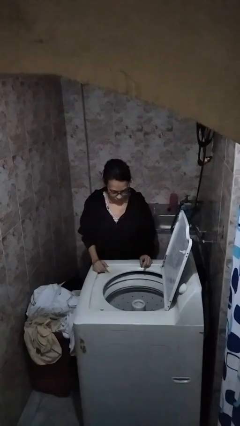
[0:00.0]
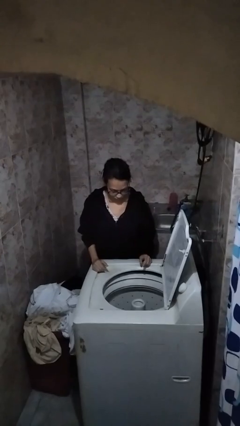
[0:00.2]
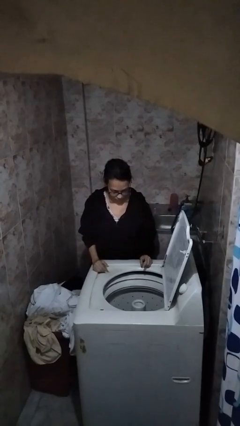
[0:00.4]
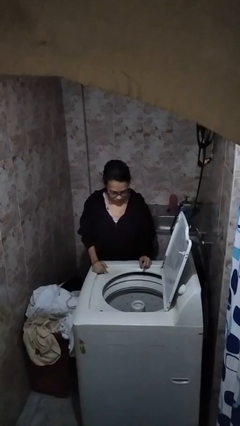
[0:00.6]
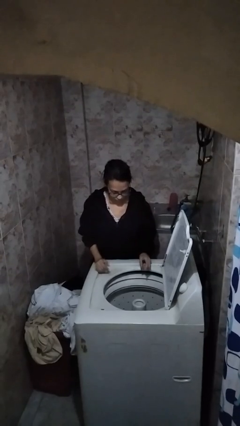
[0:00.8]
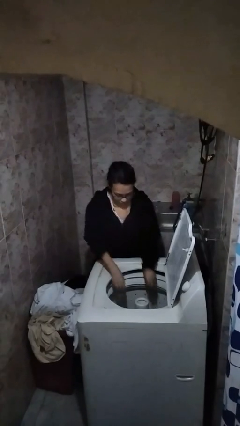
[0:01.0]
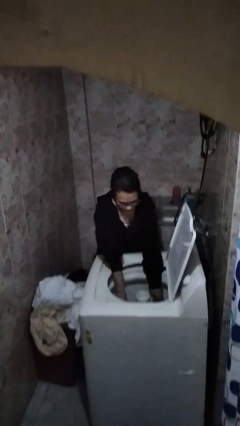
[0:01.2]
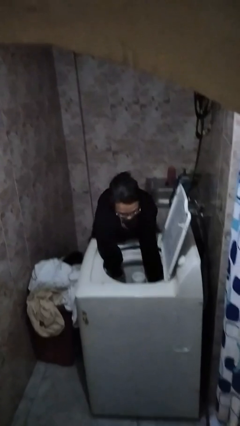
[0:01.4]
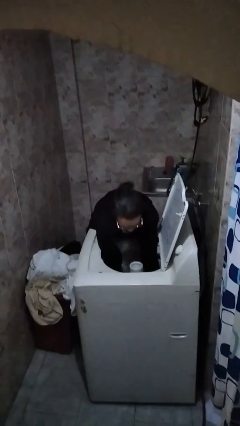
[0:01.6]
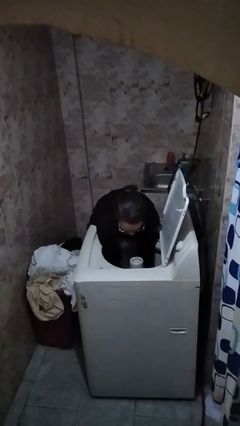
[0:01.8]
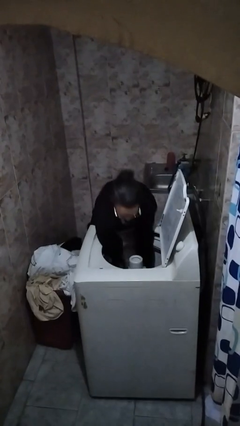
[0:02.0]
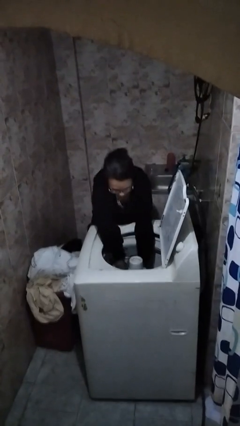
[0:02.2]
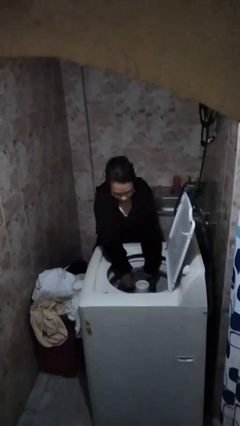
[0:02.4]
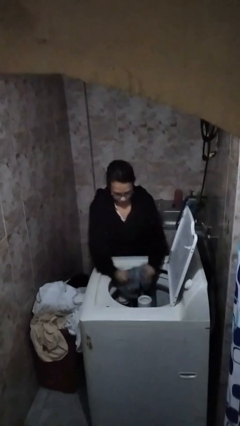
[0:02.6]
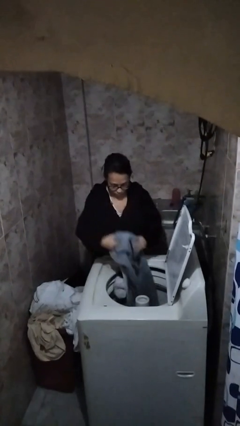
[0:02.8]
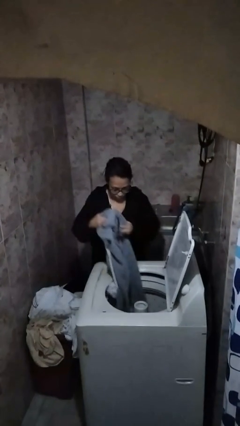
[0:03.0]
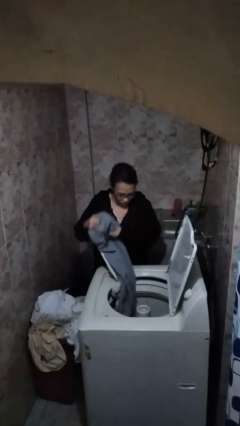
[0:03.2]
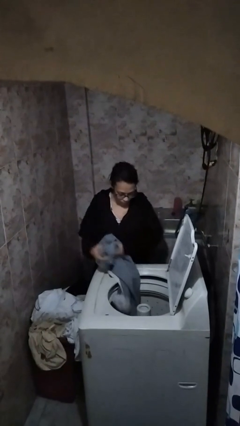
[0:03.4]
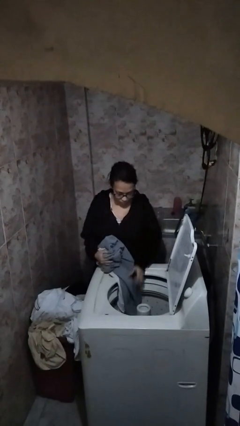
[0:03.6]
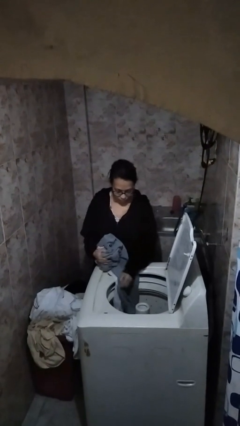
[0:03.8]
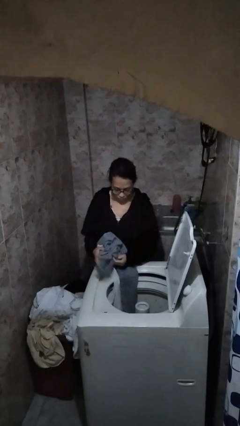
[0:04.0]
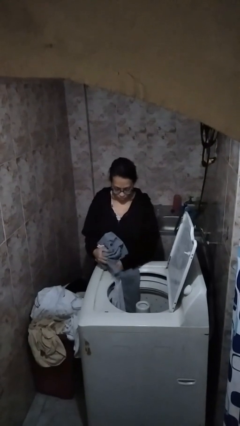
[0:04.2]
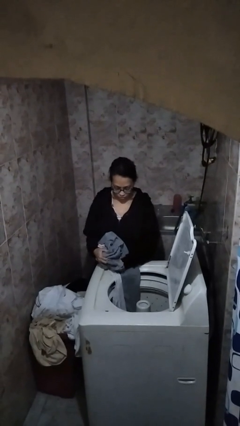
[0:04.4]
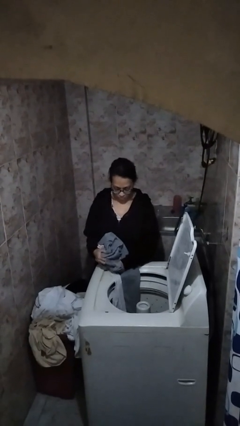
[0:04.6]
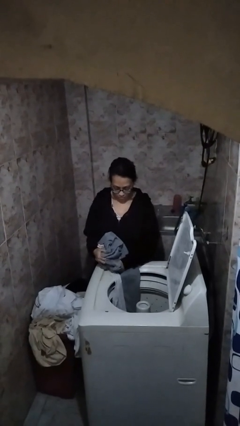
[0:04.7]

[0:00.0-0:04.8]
person unloads dryer

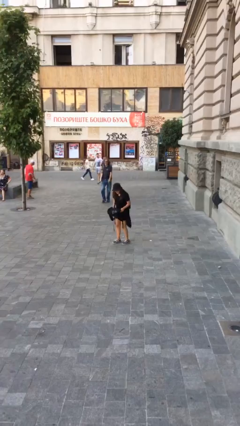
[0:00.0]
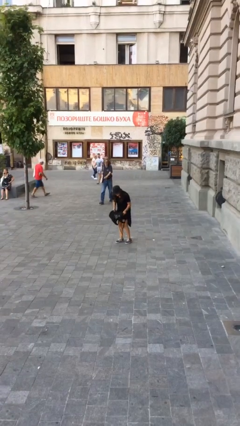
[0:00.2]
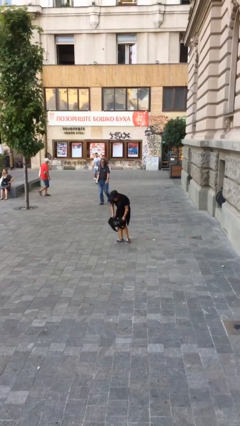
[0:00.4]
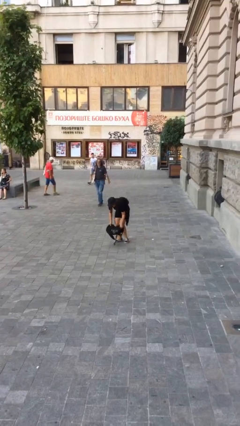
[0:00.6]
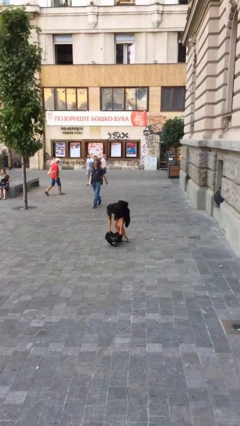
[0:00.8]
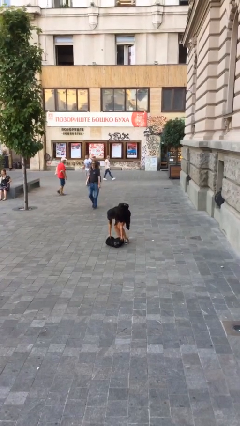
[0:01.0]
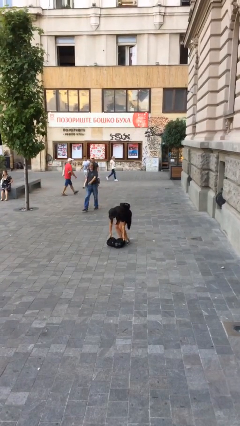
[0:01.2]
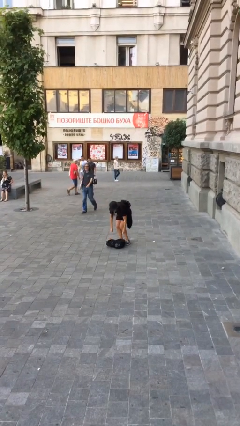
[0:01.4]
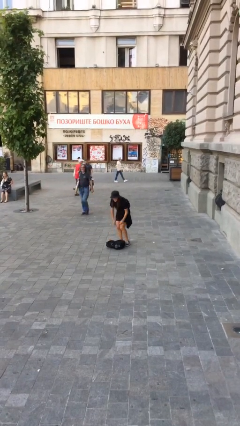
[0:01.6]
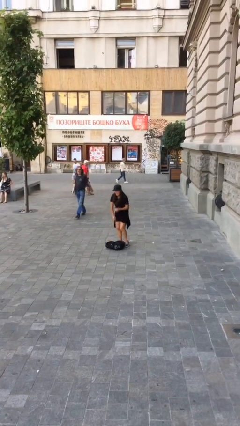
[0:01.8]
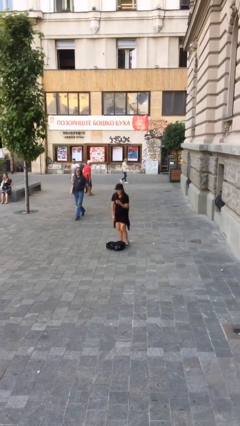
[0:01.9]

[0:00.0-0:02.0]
person puts down object on floor

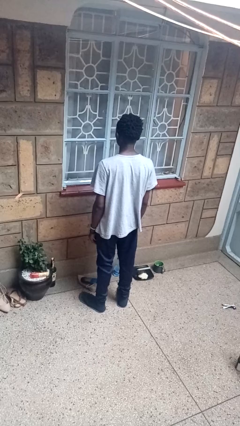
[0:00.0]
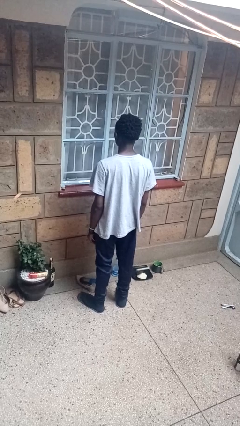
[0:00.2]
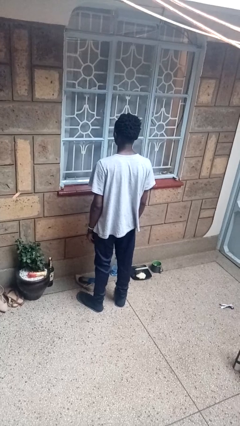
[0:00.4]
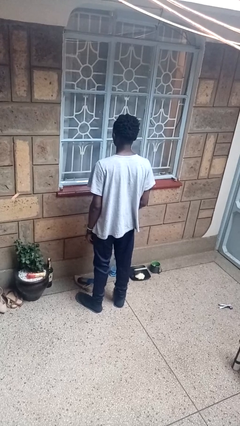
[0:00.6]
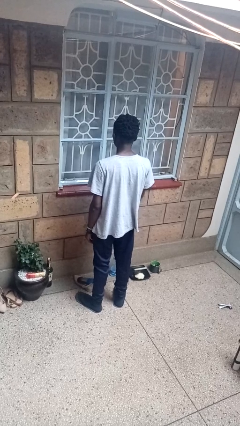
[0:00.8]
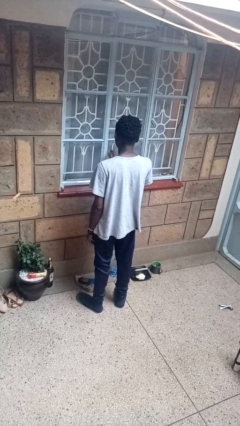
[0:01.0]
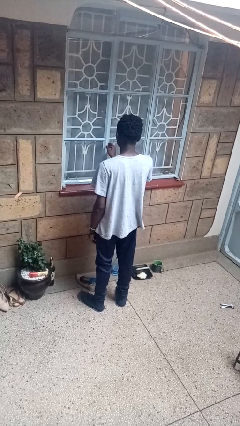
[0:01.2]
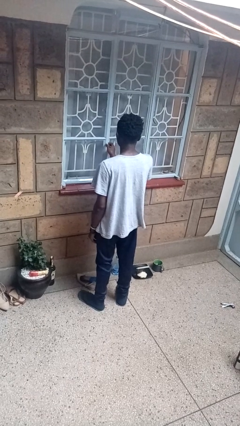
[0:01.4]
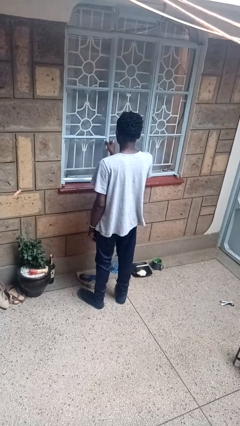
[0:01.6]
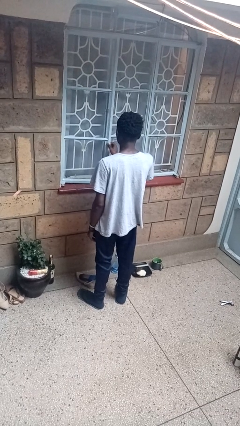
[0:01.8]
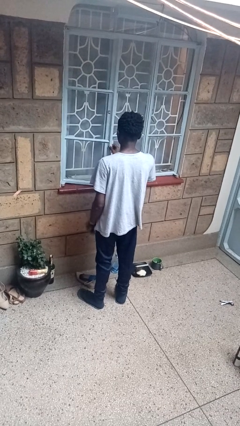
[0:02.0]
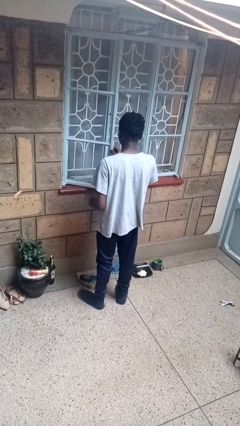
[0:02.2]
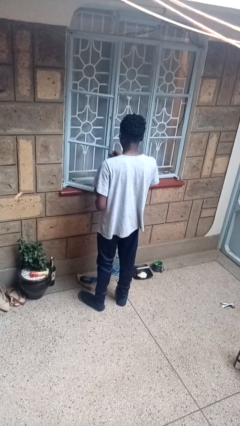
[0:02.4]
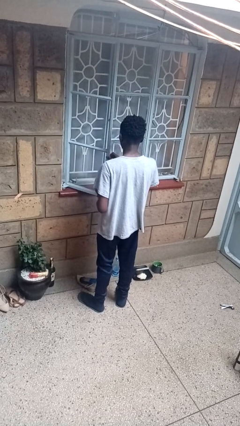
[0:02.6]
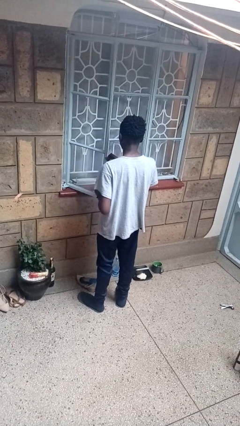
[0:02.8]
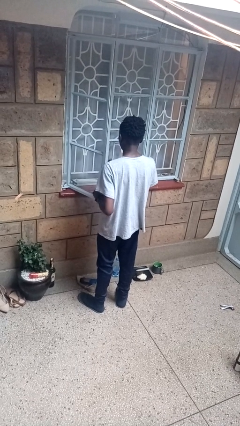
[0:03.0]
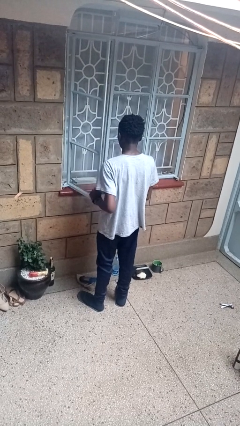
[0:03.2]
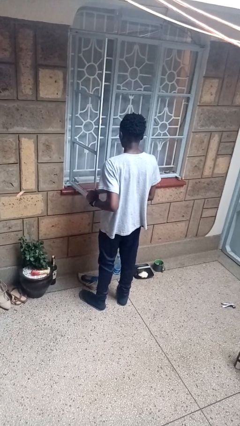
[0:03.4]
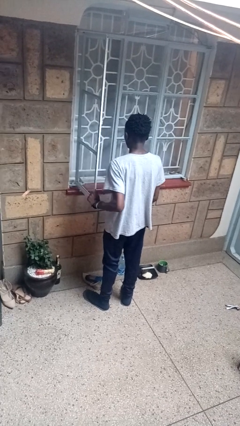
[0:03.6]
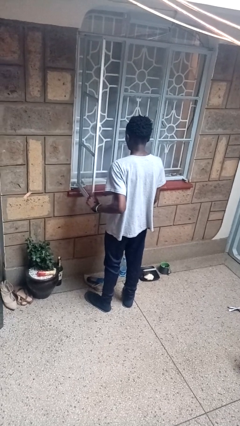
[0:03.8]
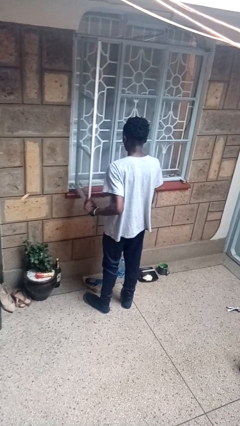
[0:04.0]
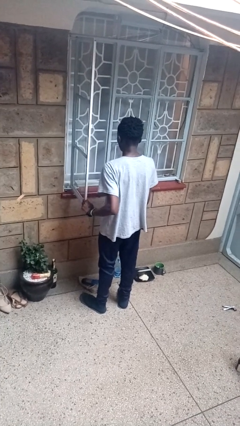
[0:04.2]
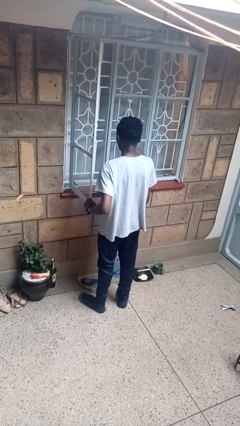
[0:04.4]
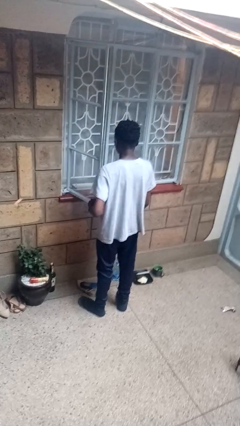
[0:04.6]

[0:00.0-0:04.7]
person opens home window

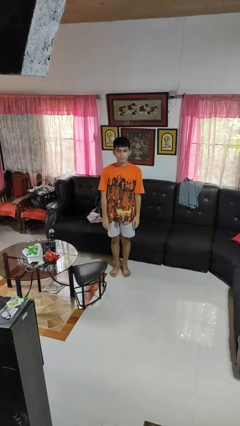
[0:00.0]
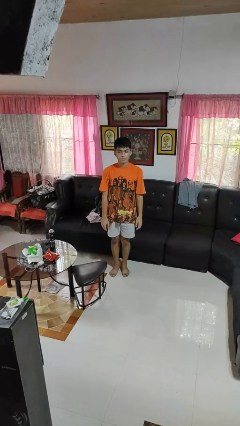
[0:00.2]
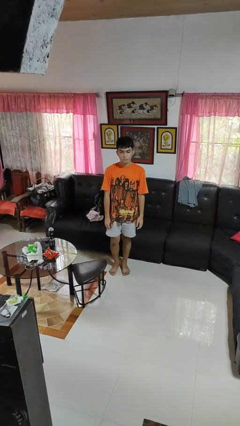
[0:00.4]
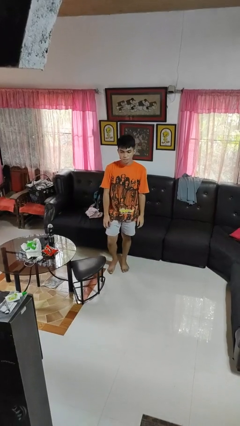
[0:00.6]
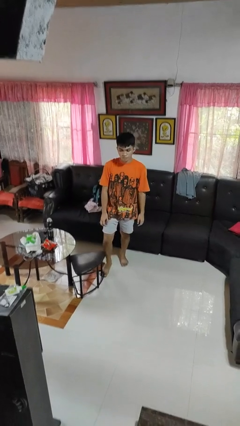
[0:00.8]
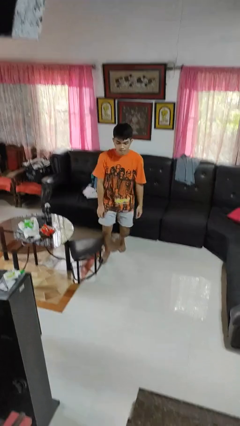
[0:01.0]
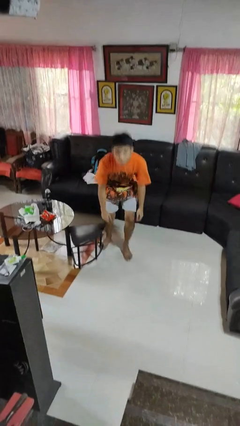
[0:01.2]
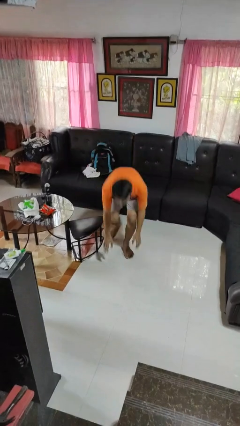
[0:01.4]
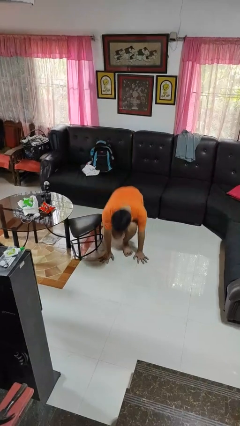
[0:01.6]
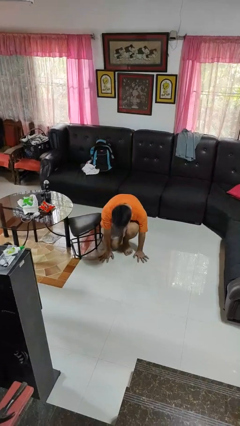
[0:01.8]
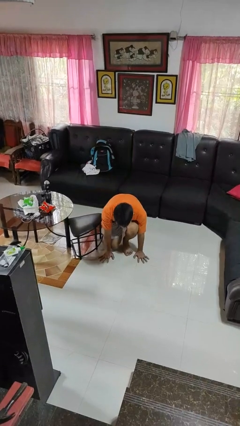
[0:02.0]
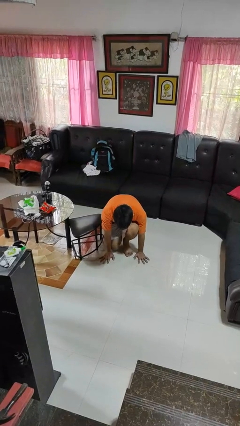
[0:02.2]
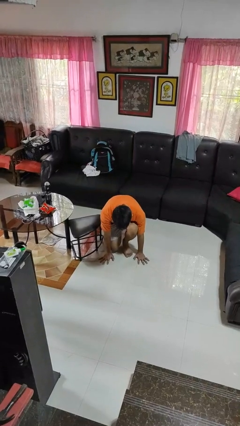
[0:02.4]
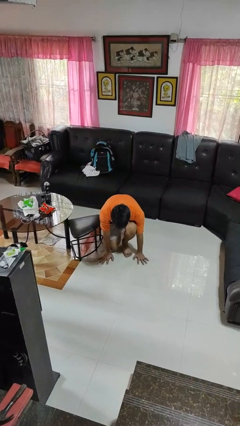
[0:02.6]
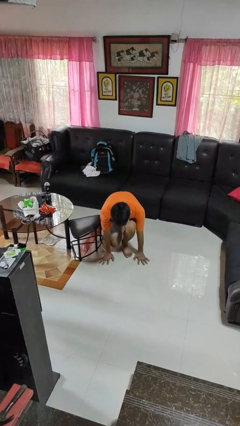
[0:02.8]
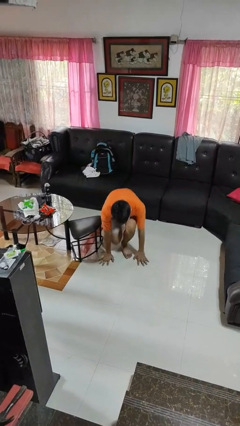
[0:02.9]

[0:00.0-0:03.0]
person trips on object on floor

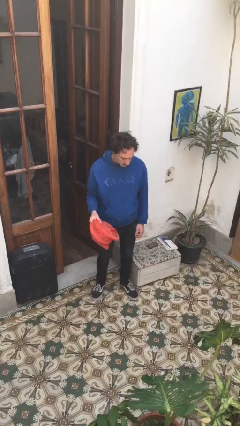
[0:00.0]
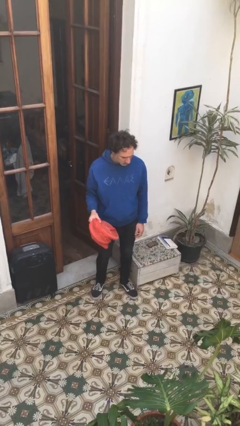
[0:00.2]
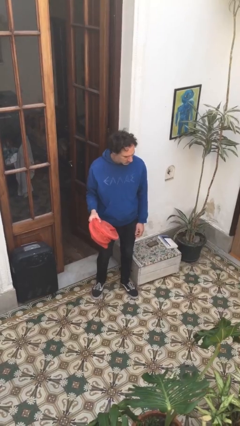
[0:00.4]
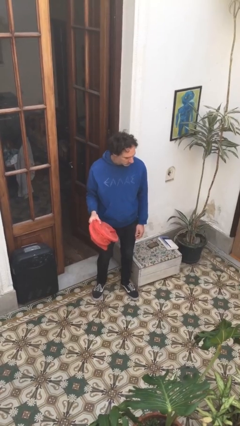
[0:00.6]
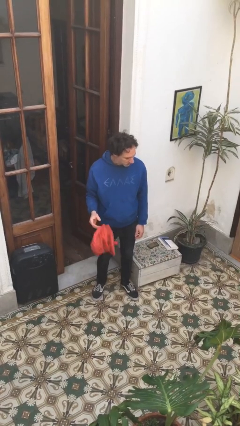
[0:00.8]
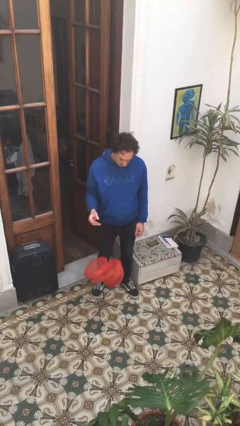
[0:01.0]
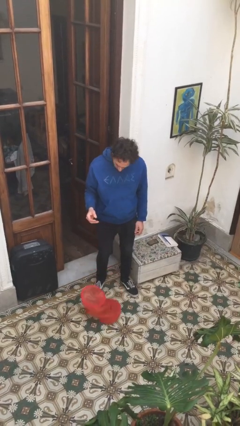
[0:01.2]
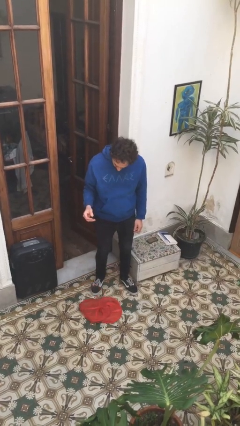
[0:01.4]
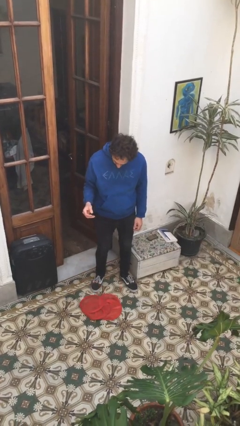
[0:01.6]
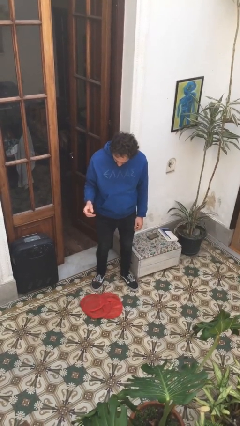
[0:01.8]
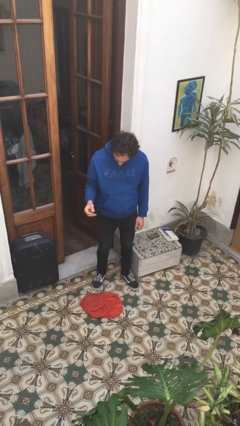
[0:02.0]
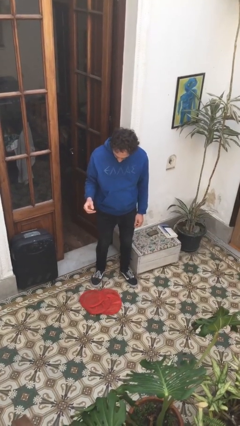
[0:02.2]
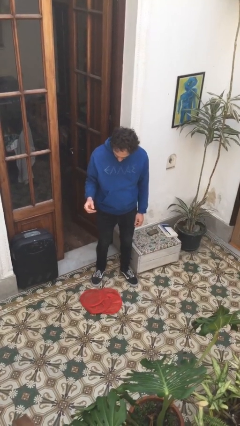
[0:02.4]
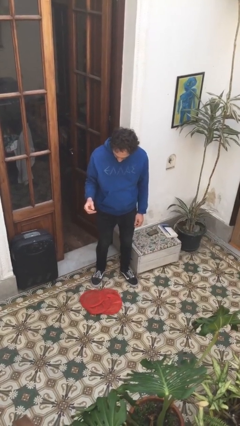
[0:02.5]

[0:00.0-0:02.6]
person drops object

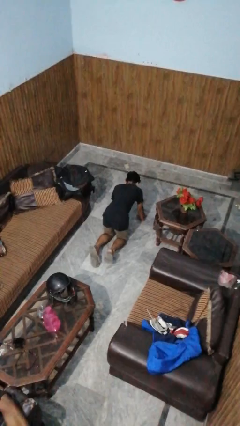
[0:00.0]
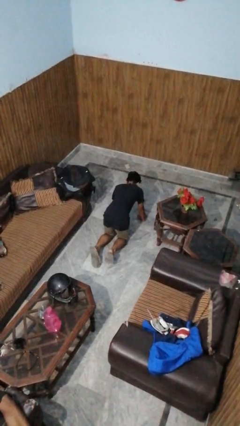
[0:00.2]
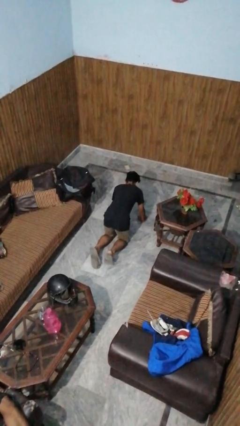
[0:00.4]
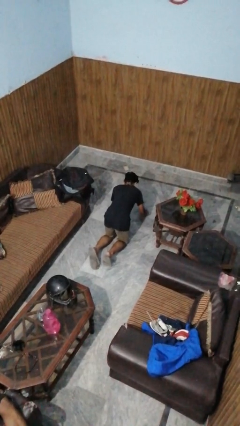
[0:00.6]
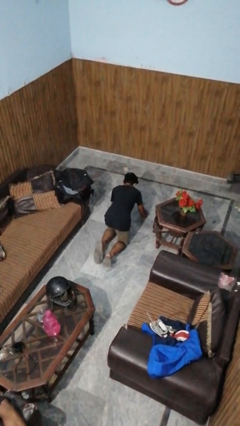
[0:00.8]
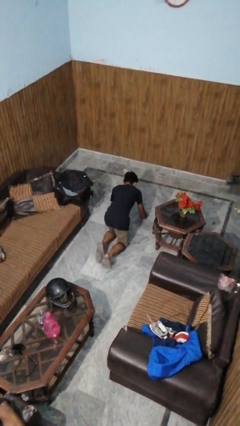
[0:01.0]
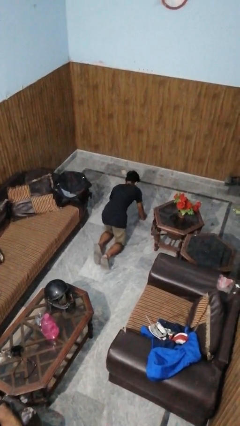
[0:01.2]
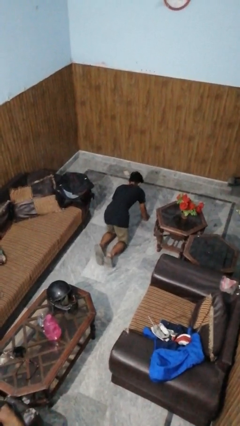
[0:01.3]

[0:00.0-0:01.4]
person crawls
